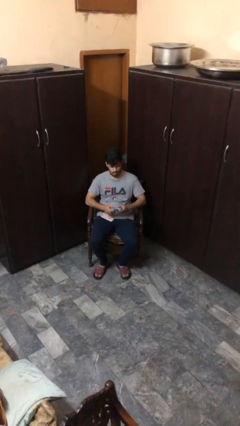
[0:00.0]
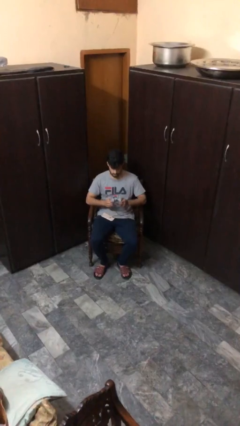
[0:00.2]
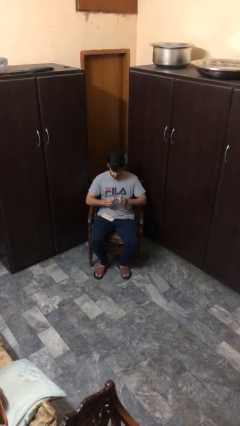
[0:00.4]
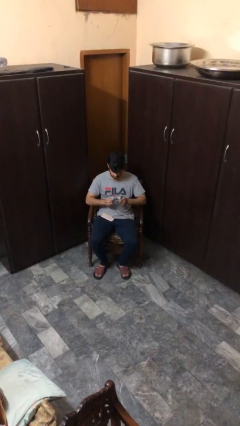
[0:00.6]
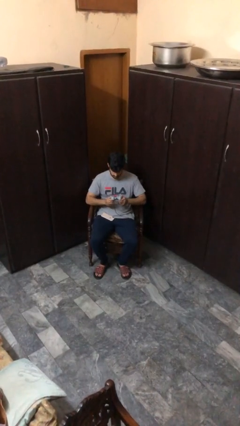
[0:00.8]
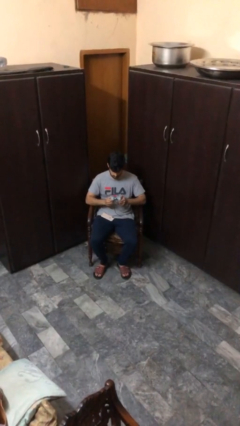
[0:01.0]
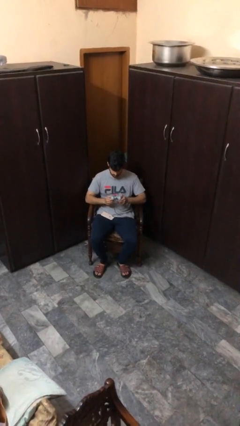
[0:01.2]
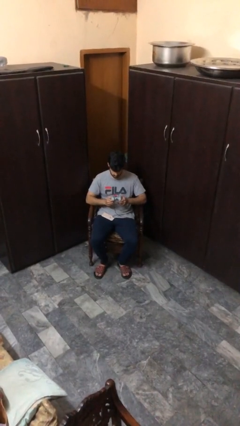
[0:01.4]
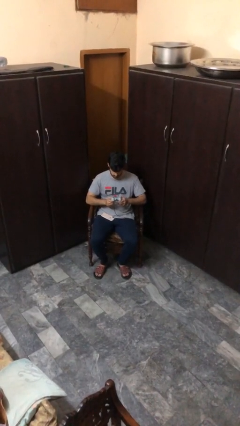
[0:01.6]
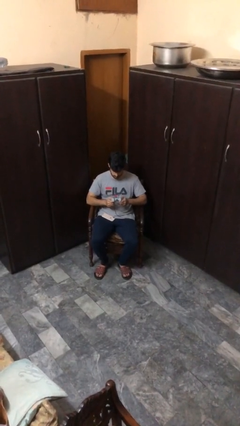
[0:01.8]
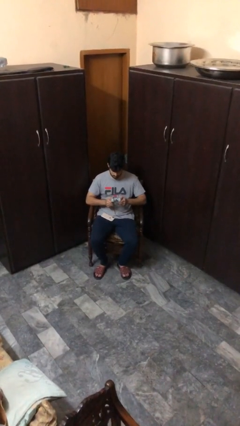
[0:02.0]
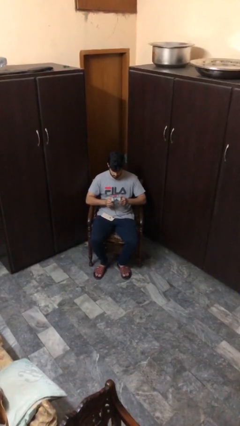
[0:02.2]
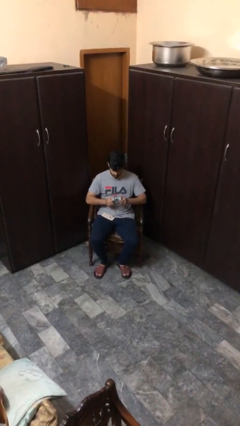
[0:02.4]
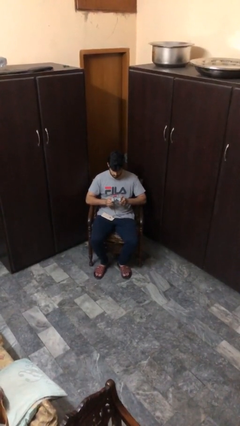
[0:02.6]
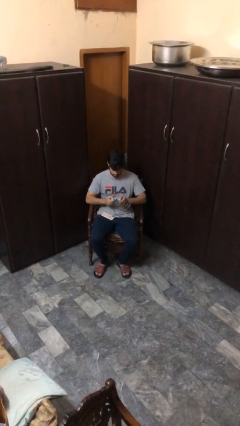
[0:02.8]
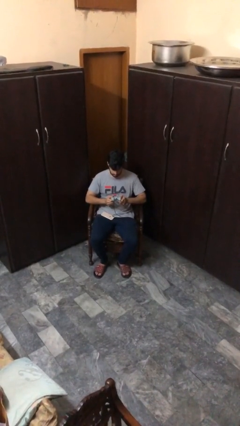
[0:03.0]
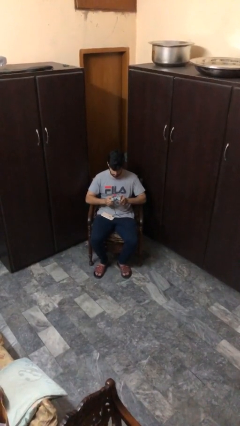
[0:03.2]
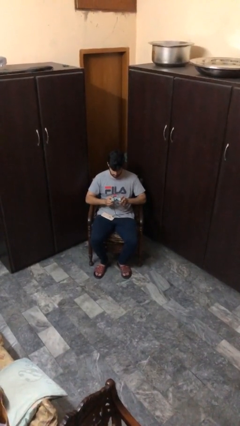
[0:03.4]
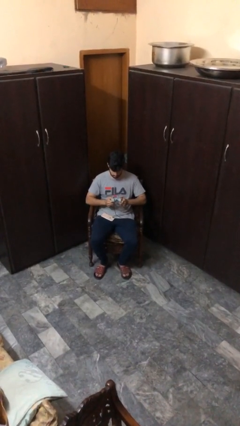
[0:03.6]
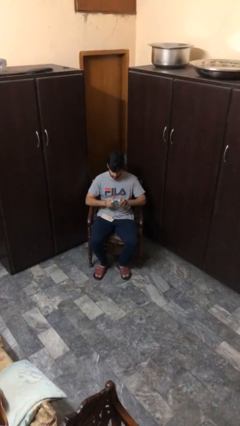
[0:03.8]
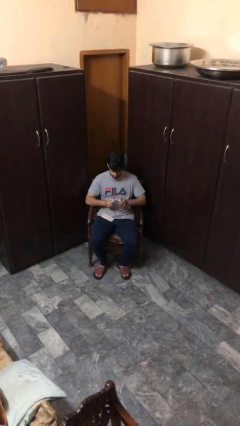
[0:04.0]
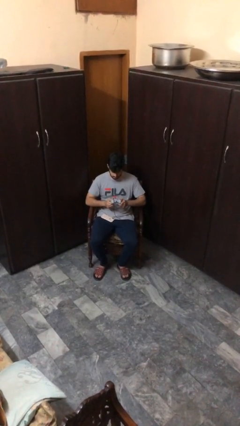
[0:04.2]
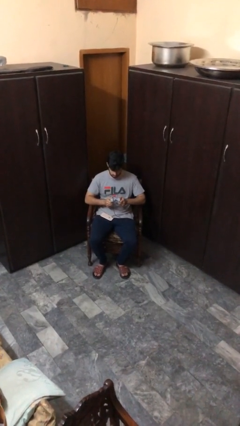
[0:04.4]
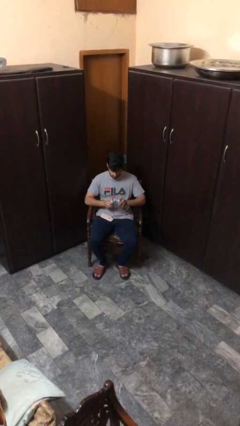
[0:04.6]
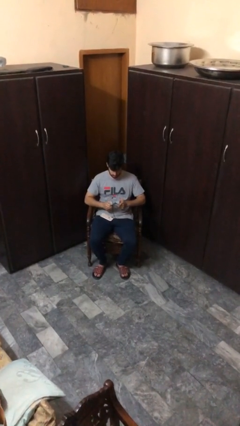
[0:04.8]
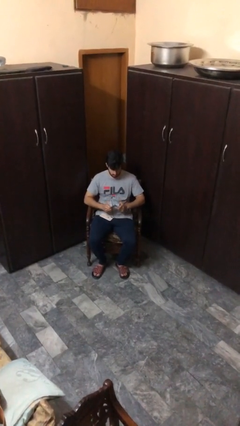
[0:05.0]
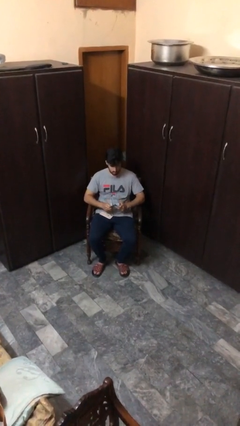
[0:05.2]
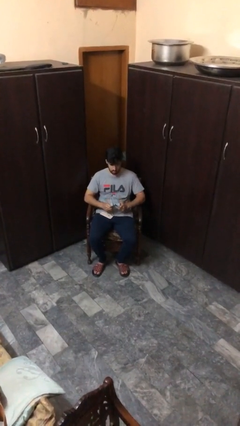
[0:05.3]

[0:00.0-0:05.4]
person interacts with handheld game

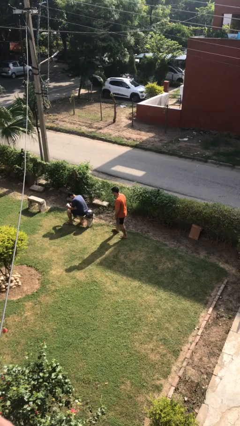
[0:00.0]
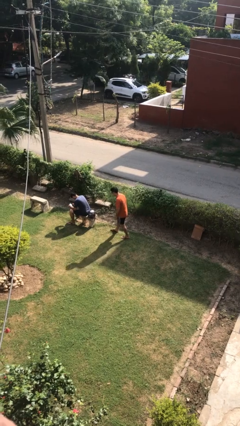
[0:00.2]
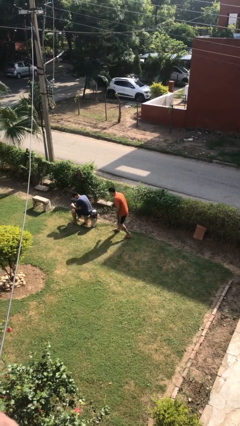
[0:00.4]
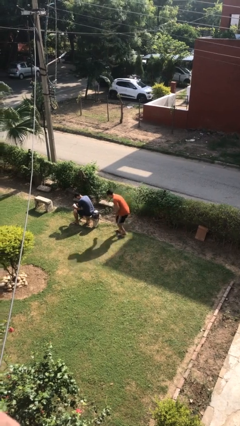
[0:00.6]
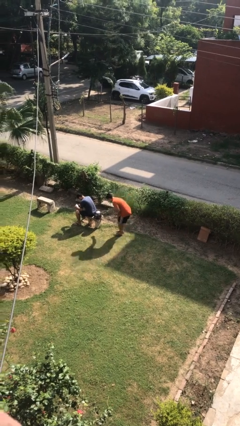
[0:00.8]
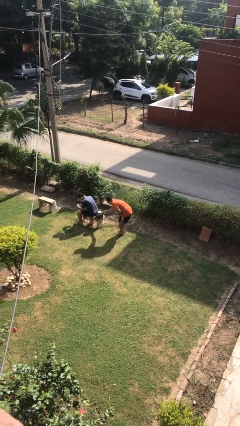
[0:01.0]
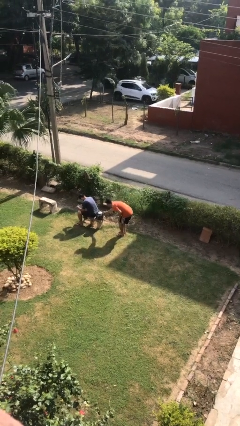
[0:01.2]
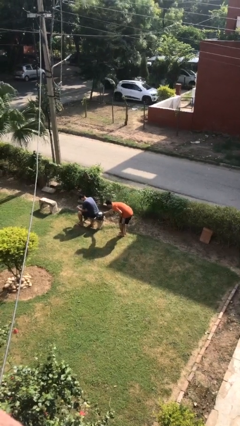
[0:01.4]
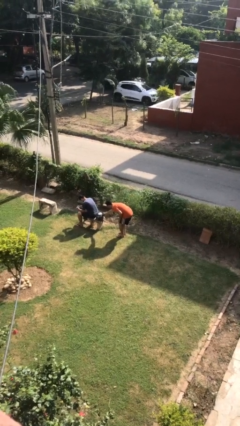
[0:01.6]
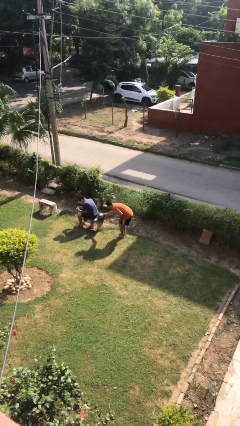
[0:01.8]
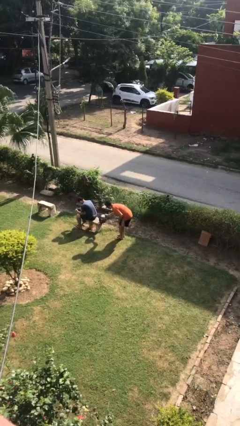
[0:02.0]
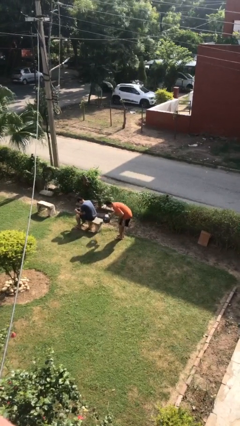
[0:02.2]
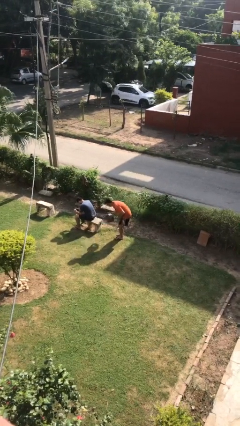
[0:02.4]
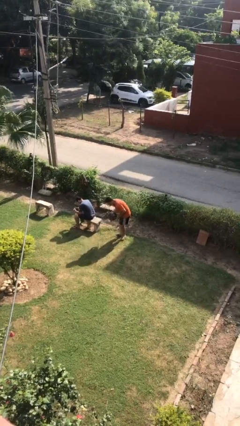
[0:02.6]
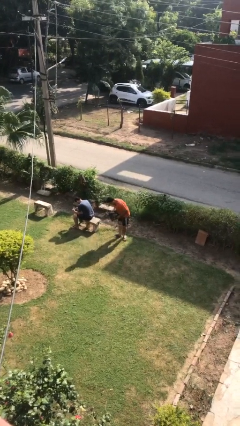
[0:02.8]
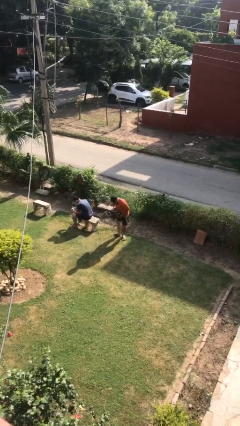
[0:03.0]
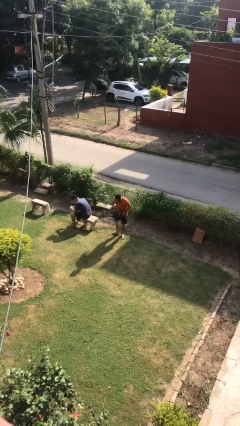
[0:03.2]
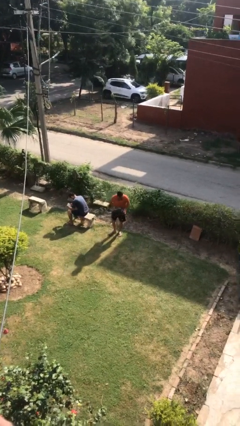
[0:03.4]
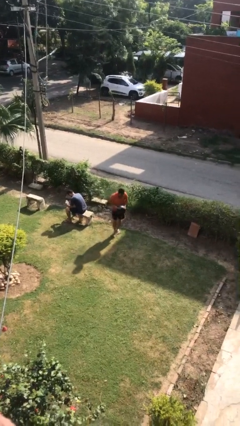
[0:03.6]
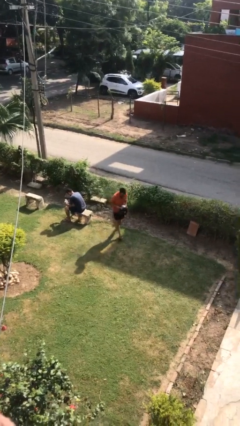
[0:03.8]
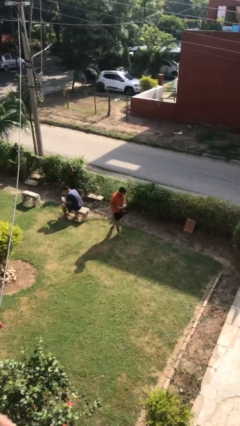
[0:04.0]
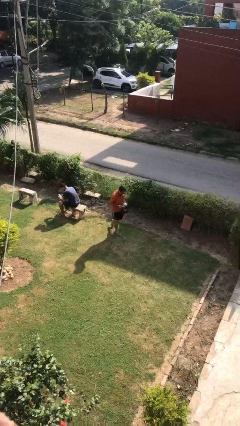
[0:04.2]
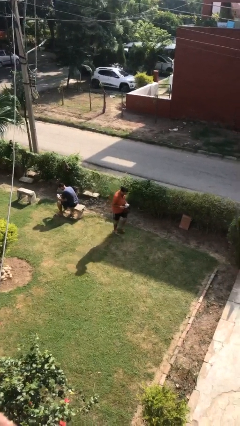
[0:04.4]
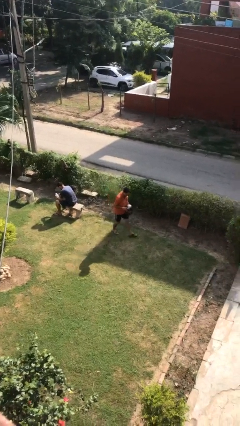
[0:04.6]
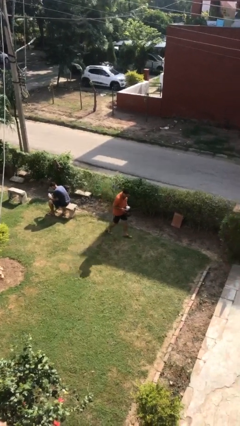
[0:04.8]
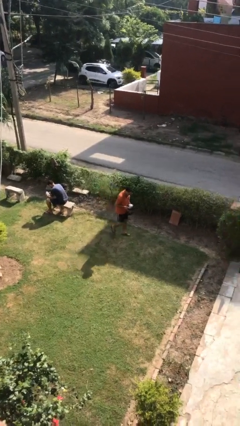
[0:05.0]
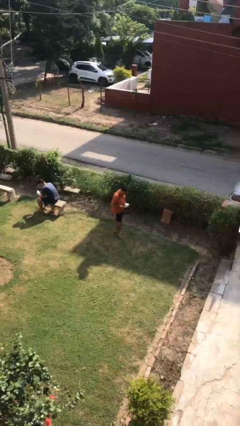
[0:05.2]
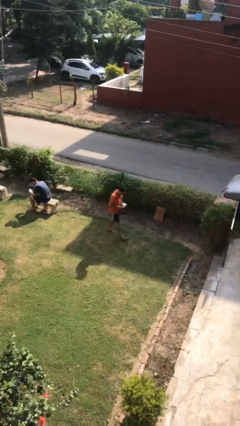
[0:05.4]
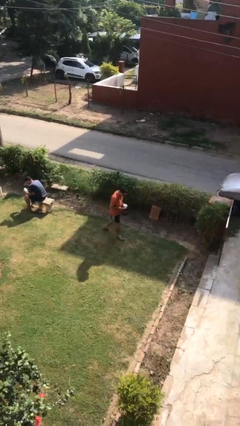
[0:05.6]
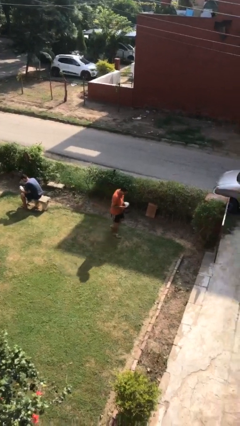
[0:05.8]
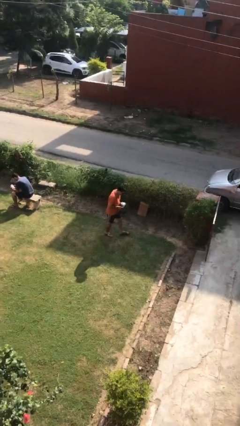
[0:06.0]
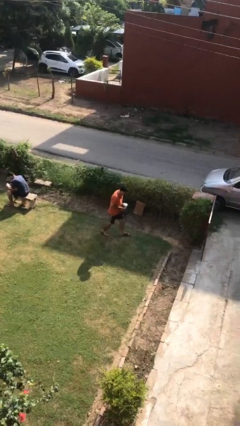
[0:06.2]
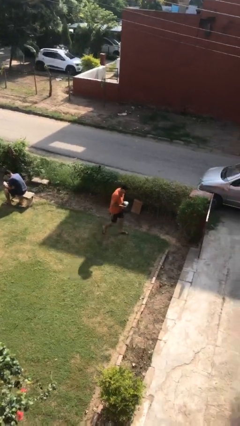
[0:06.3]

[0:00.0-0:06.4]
person steals object from person

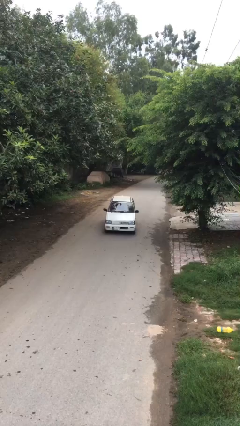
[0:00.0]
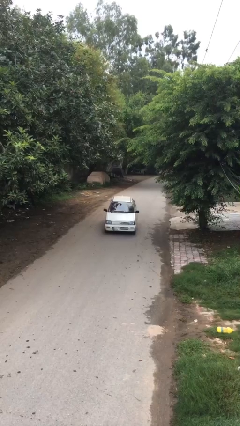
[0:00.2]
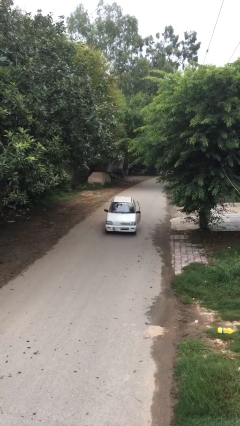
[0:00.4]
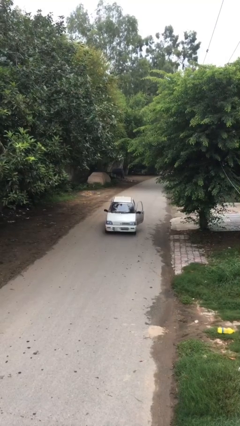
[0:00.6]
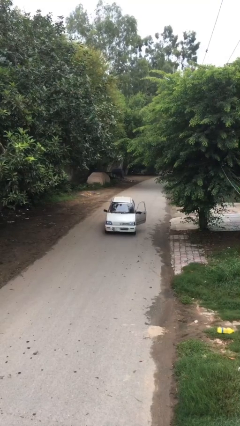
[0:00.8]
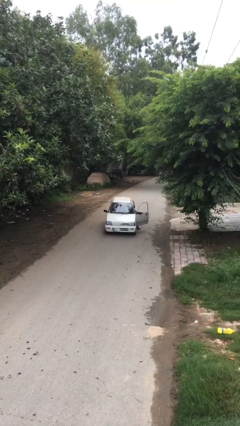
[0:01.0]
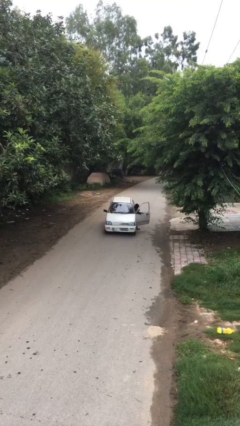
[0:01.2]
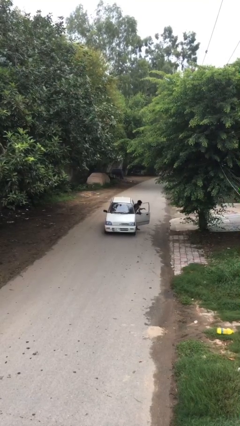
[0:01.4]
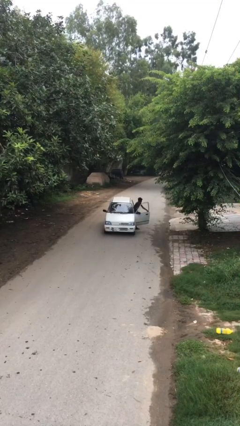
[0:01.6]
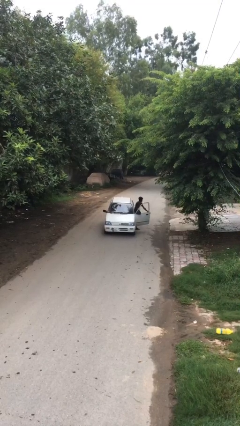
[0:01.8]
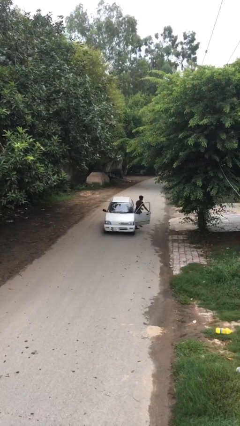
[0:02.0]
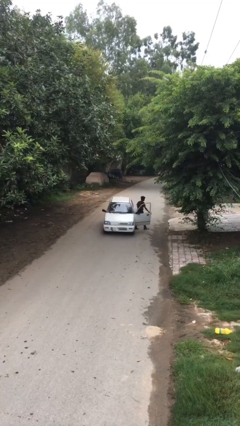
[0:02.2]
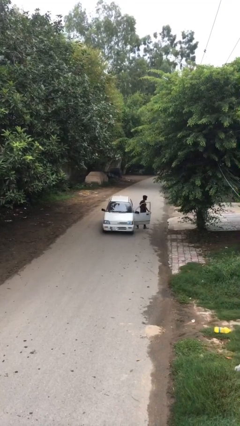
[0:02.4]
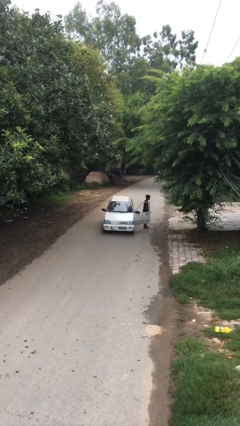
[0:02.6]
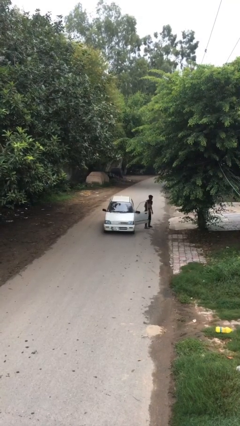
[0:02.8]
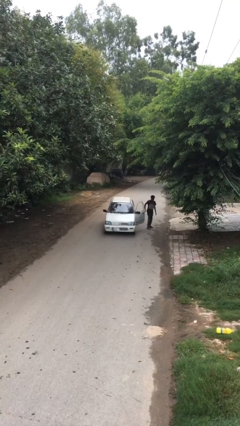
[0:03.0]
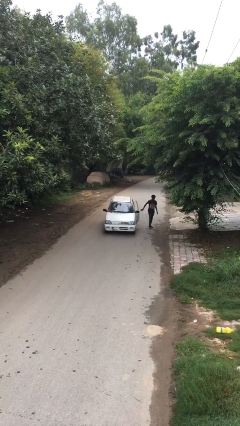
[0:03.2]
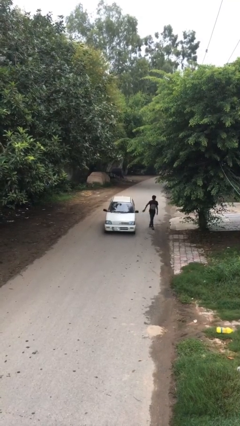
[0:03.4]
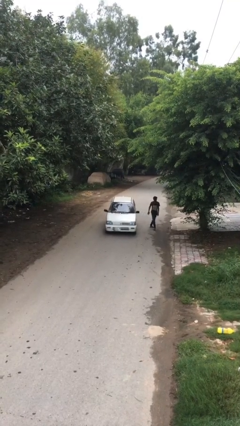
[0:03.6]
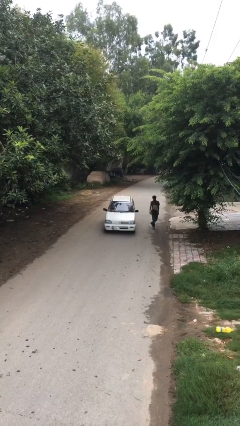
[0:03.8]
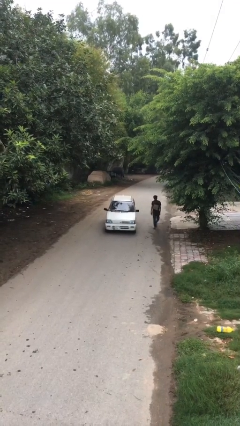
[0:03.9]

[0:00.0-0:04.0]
car drops off person

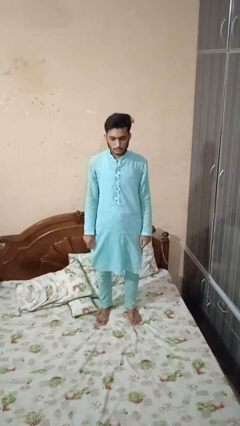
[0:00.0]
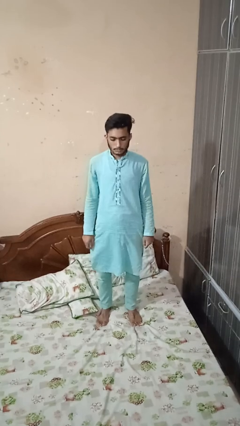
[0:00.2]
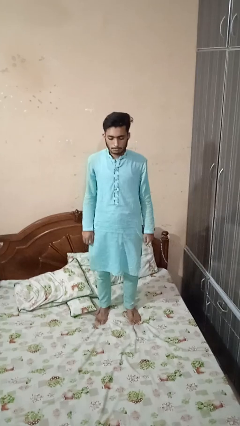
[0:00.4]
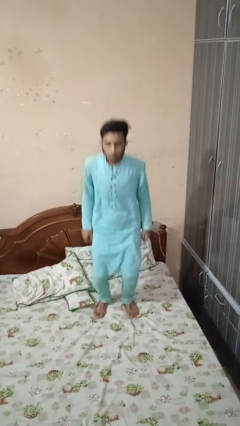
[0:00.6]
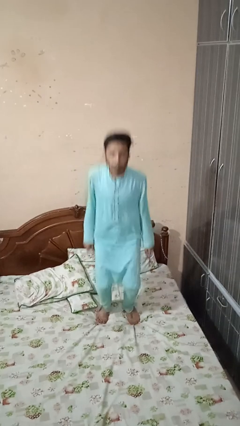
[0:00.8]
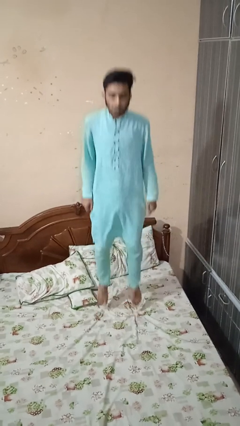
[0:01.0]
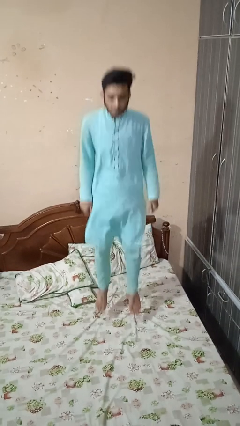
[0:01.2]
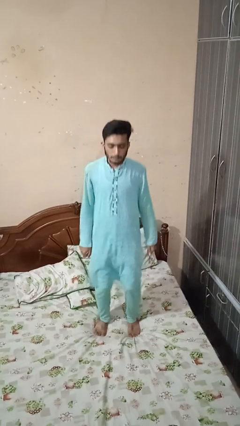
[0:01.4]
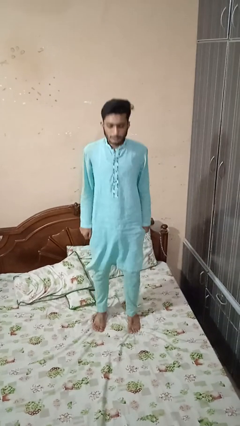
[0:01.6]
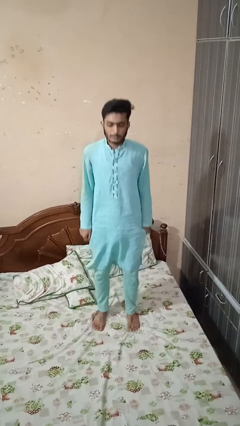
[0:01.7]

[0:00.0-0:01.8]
person jumps on bed
